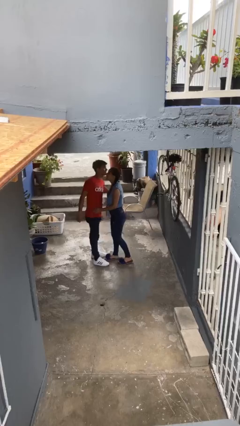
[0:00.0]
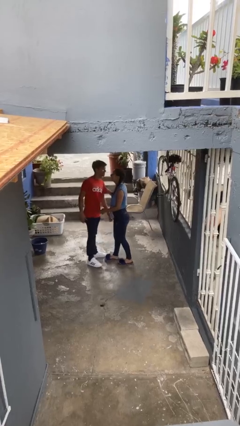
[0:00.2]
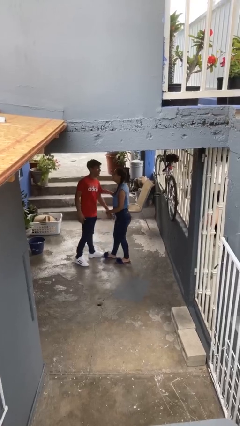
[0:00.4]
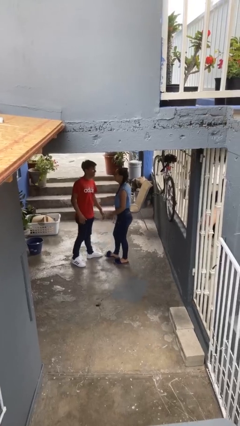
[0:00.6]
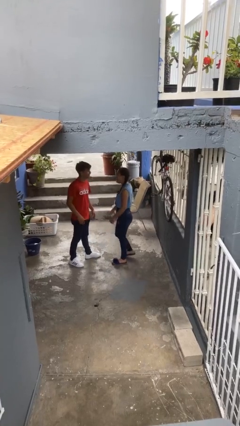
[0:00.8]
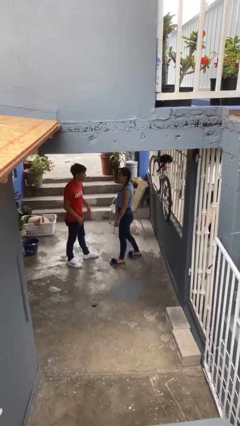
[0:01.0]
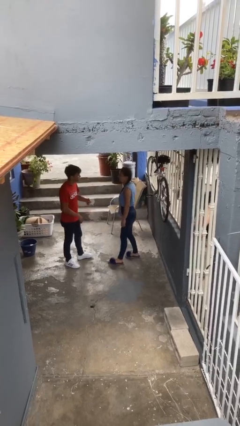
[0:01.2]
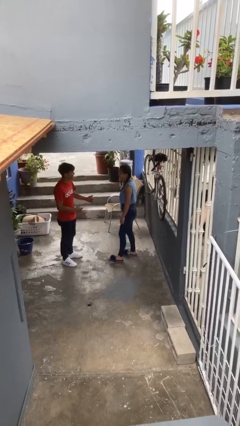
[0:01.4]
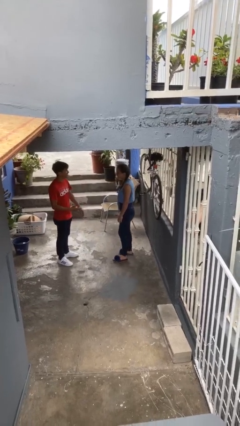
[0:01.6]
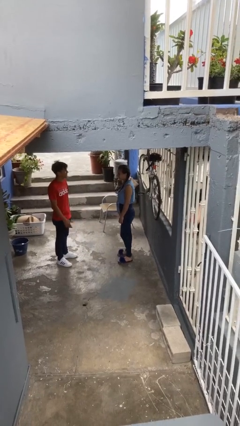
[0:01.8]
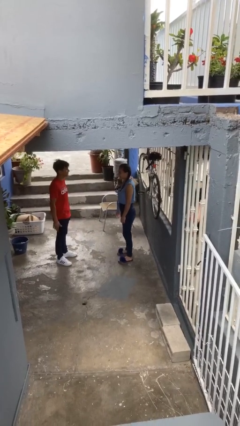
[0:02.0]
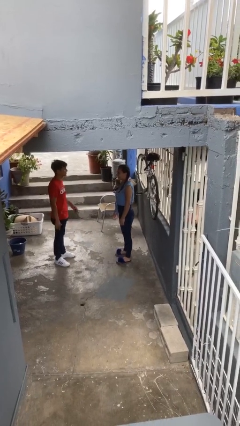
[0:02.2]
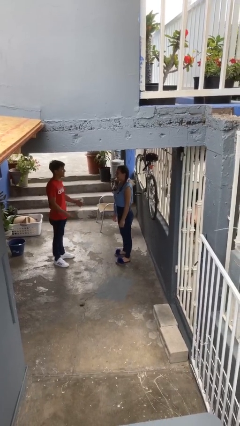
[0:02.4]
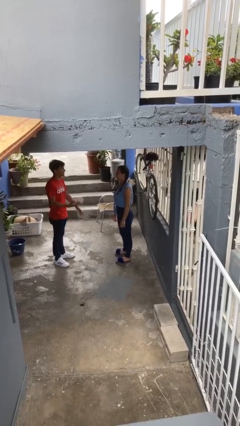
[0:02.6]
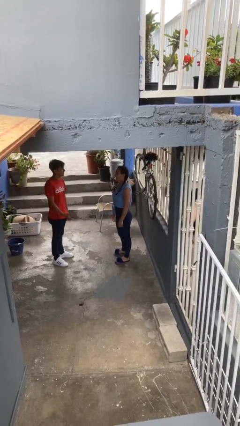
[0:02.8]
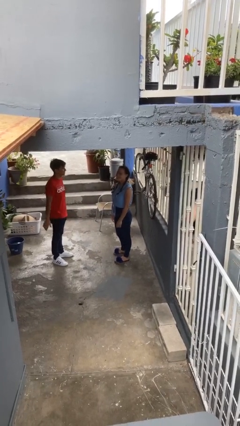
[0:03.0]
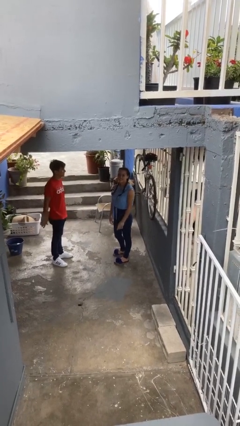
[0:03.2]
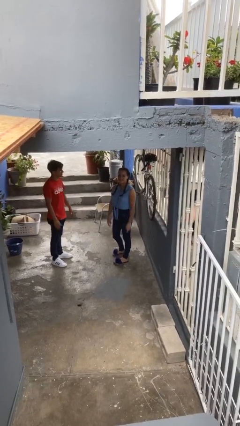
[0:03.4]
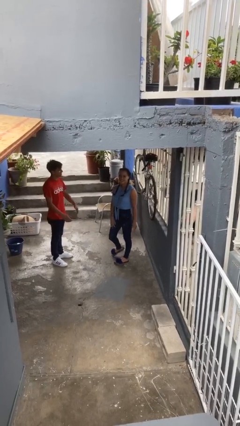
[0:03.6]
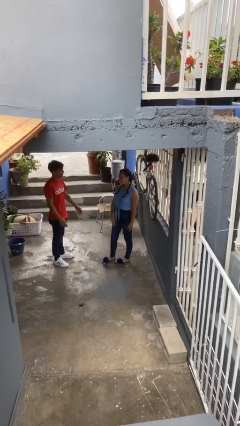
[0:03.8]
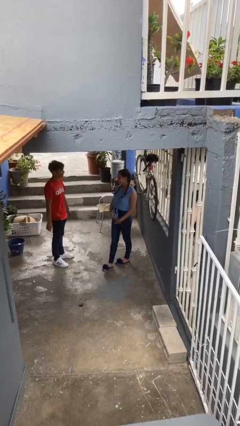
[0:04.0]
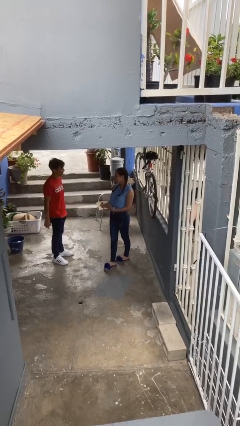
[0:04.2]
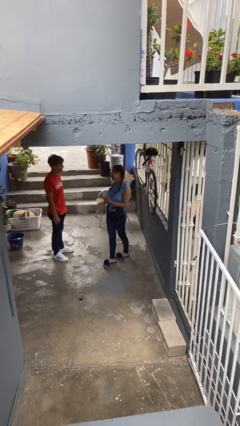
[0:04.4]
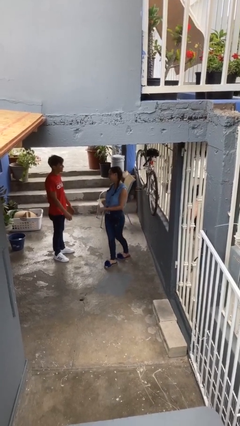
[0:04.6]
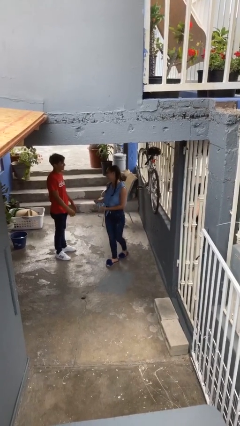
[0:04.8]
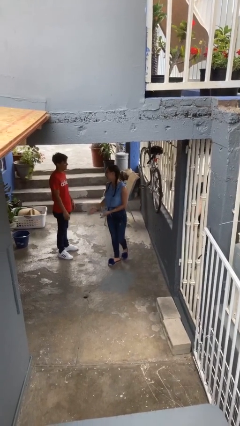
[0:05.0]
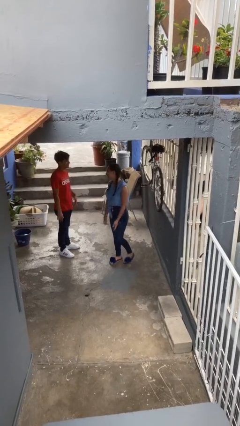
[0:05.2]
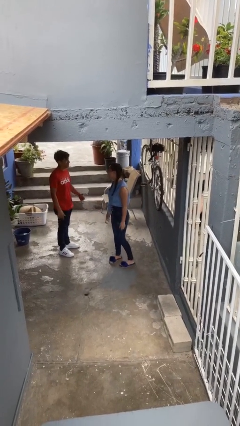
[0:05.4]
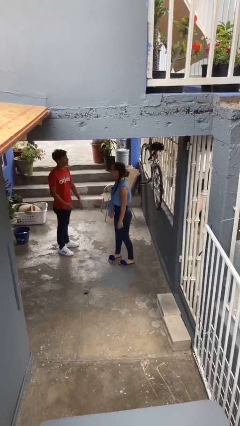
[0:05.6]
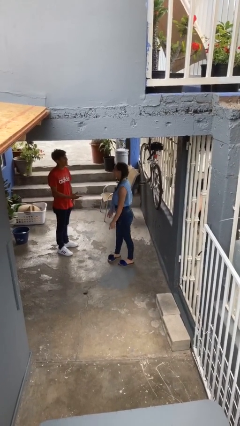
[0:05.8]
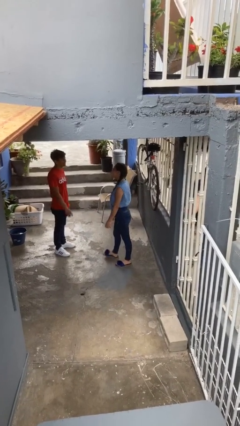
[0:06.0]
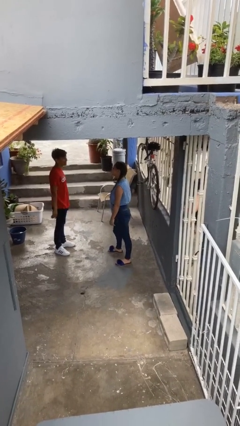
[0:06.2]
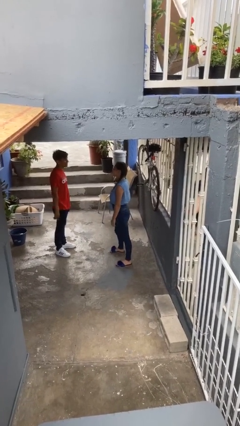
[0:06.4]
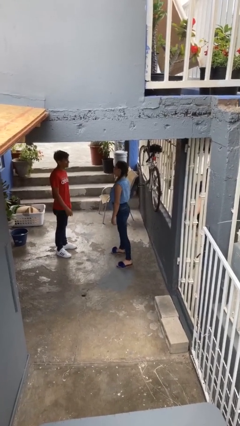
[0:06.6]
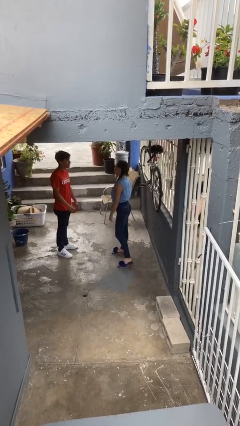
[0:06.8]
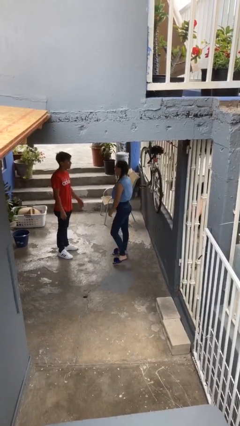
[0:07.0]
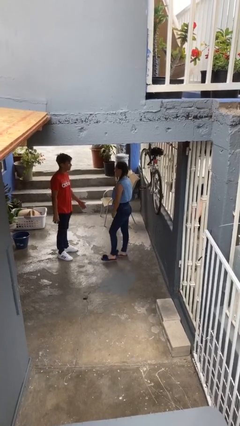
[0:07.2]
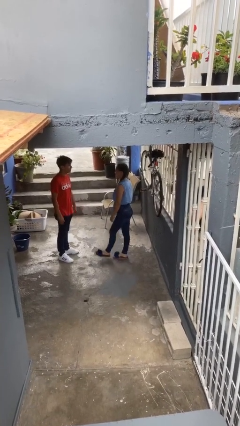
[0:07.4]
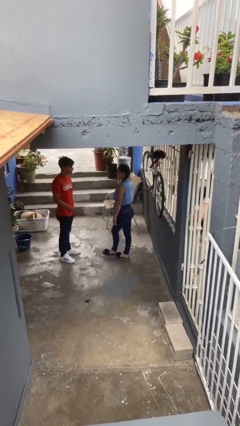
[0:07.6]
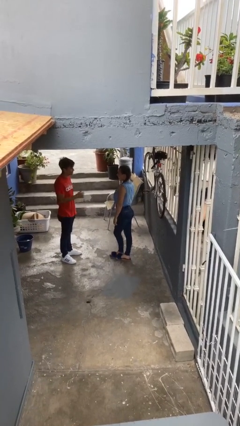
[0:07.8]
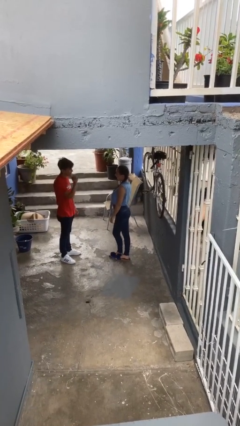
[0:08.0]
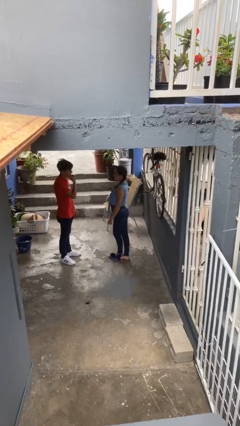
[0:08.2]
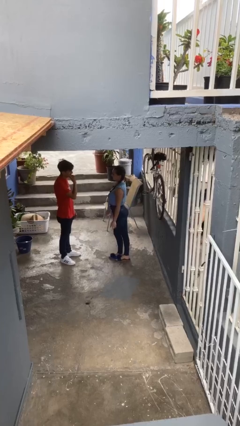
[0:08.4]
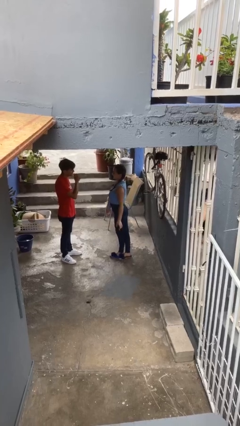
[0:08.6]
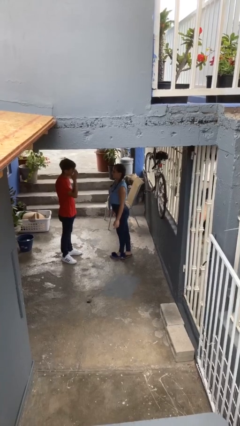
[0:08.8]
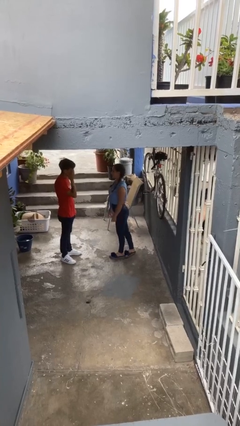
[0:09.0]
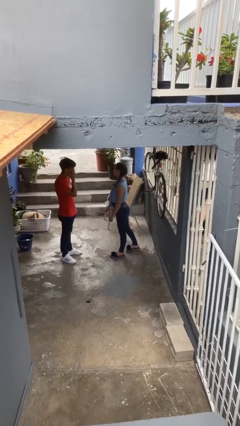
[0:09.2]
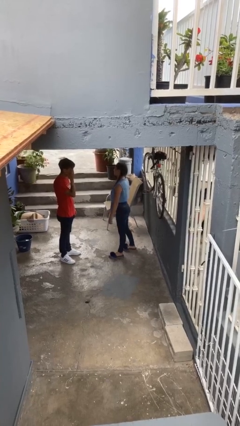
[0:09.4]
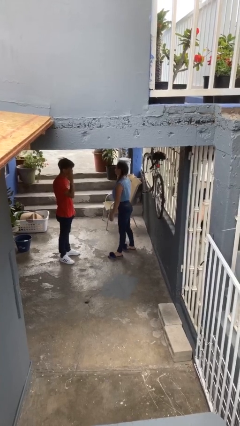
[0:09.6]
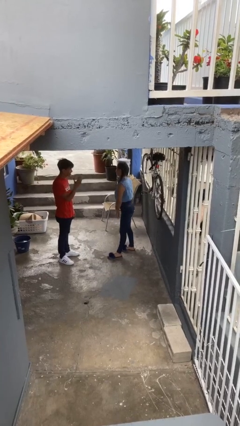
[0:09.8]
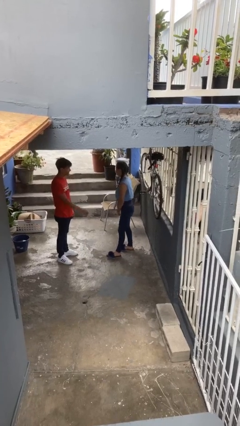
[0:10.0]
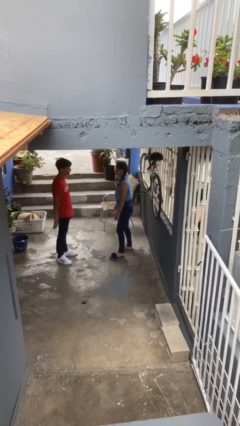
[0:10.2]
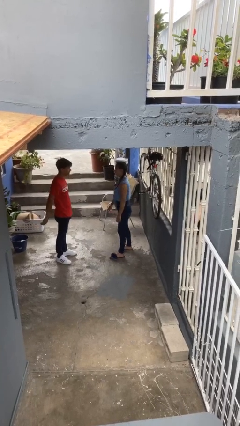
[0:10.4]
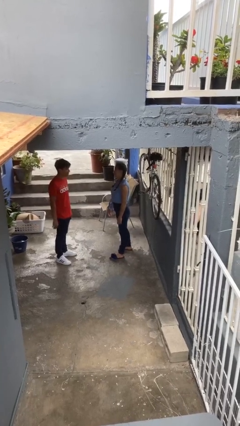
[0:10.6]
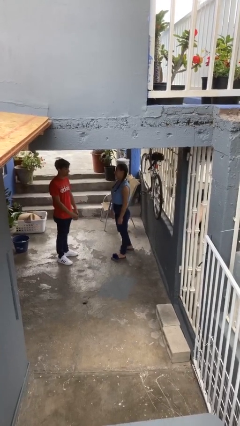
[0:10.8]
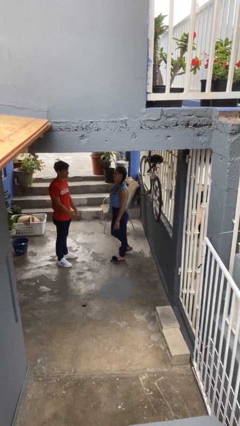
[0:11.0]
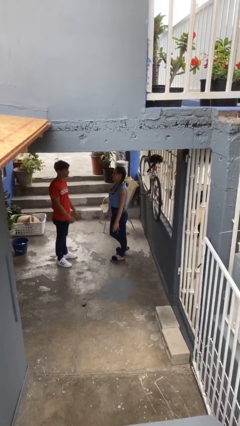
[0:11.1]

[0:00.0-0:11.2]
person talks to person

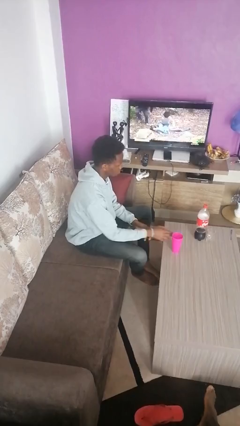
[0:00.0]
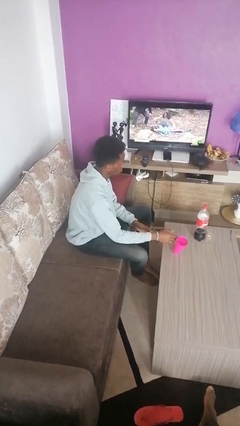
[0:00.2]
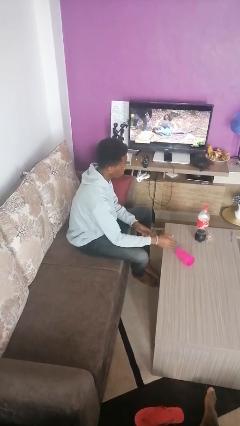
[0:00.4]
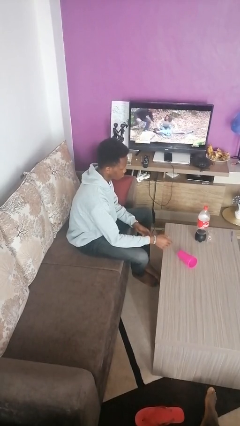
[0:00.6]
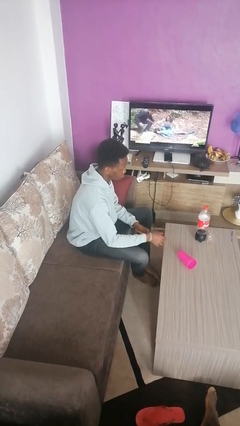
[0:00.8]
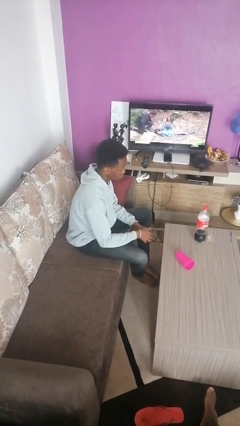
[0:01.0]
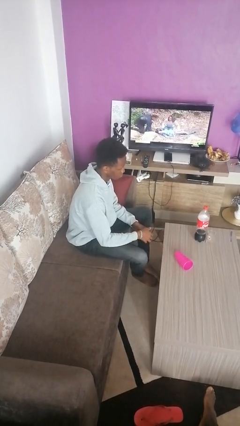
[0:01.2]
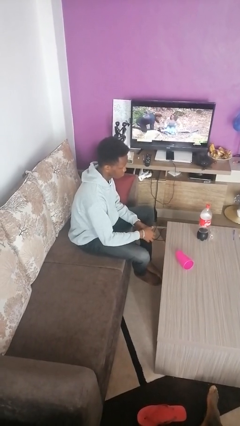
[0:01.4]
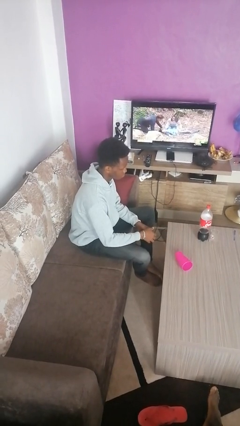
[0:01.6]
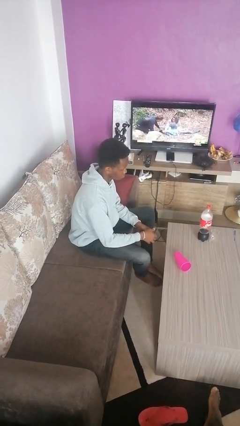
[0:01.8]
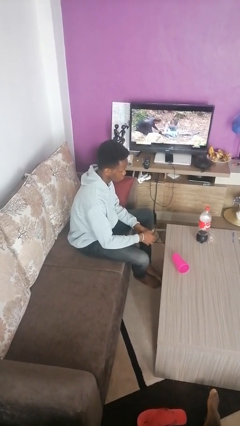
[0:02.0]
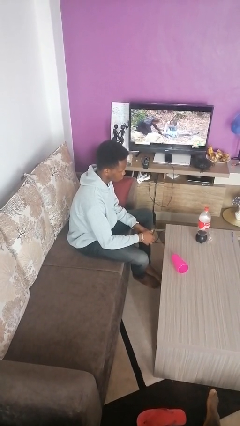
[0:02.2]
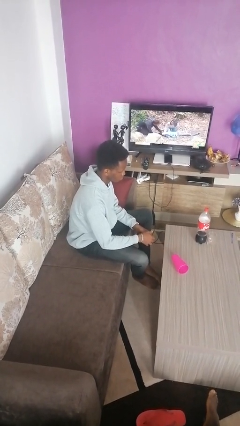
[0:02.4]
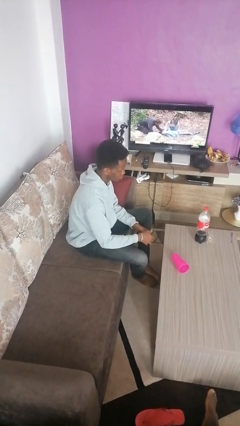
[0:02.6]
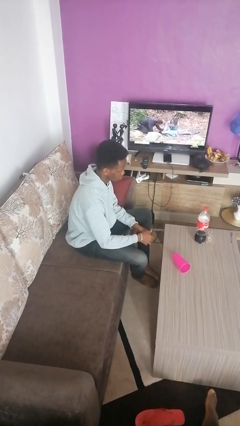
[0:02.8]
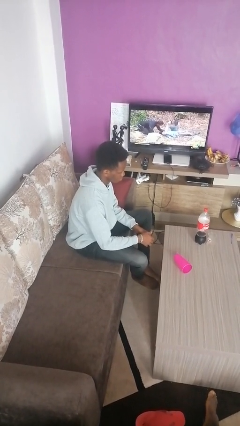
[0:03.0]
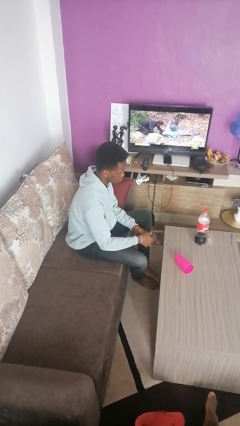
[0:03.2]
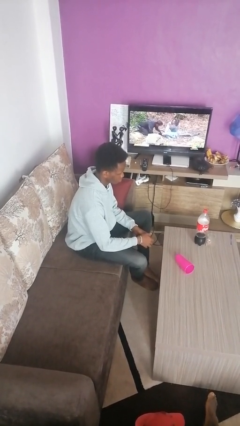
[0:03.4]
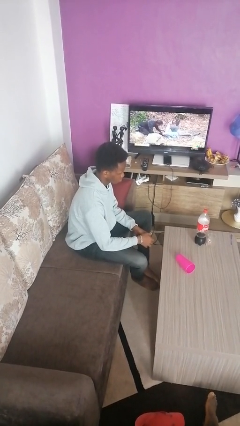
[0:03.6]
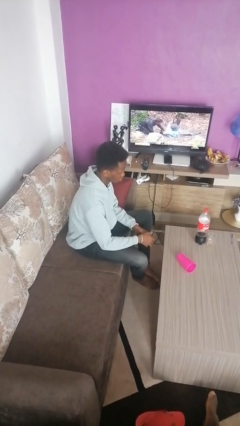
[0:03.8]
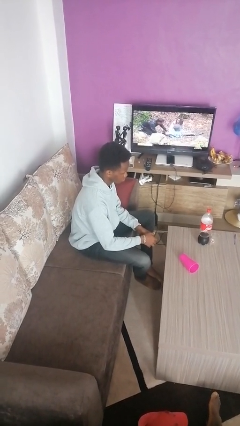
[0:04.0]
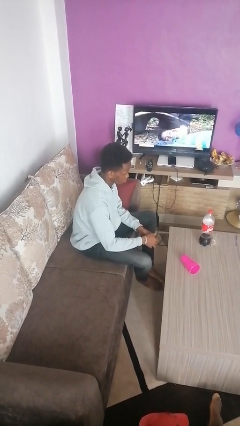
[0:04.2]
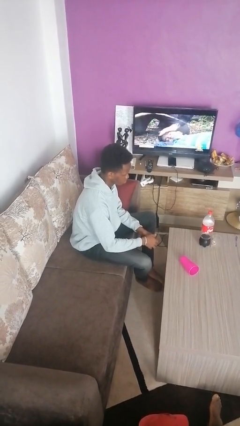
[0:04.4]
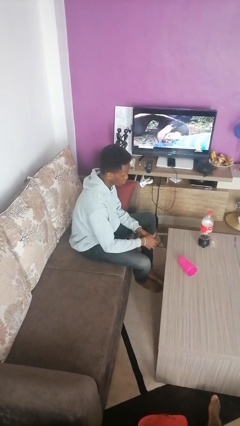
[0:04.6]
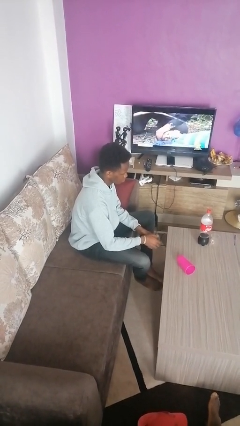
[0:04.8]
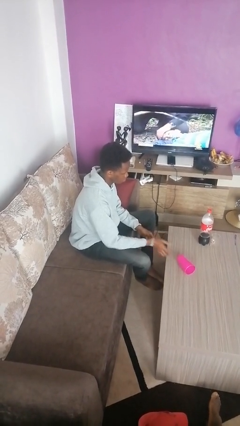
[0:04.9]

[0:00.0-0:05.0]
person knocks over glass

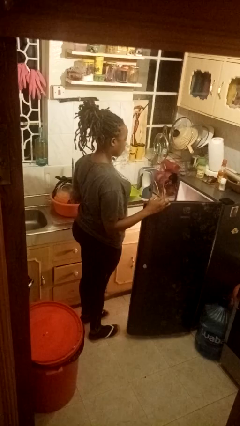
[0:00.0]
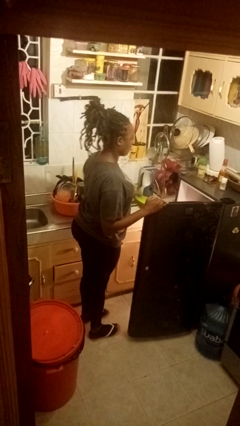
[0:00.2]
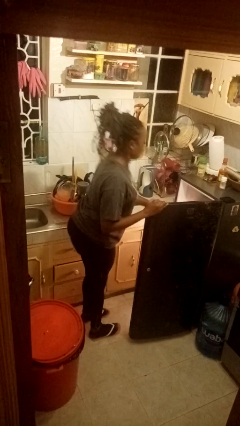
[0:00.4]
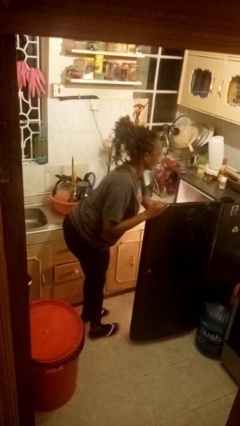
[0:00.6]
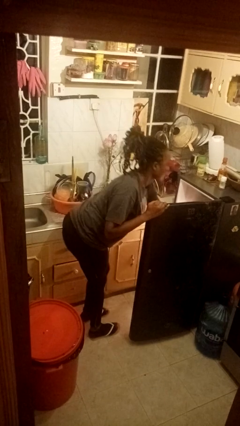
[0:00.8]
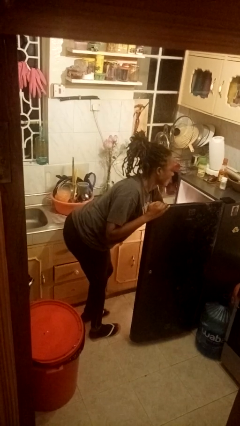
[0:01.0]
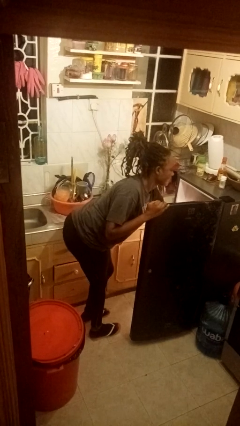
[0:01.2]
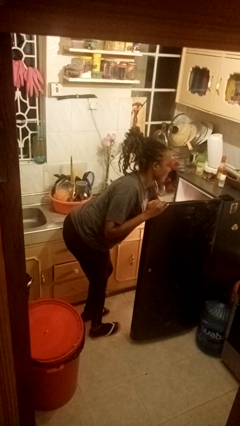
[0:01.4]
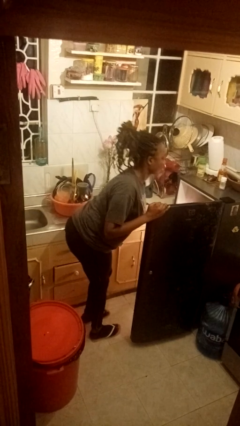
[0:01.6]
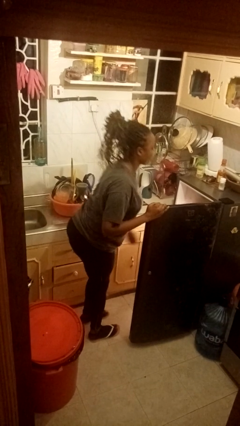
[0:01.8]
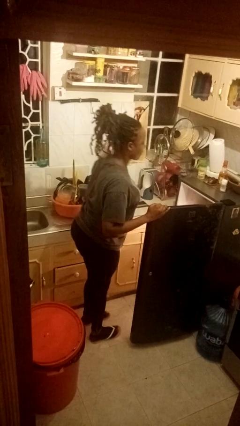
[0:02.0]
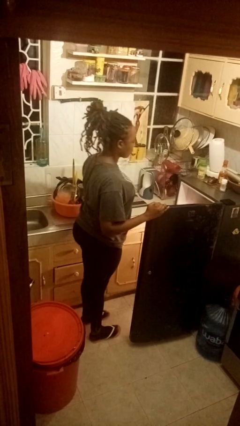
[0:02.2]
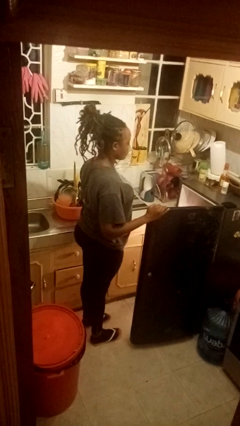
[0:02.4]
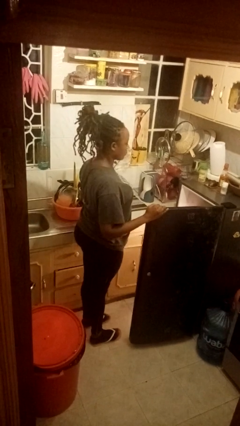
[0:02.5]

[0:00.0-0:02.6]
person puts object into refrigerator
